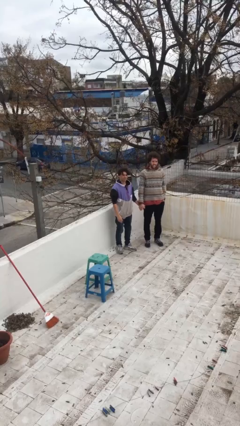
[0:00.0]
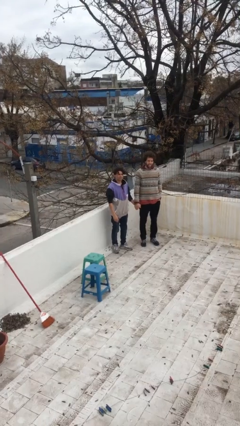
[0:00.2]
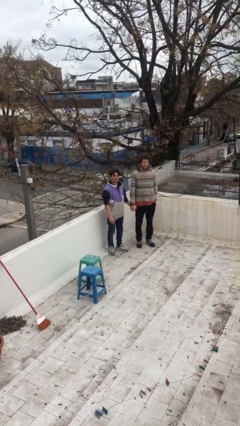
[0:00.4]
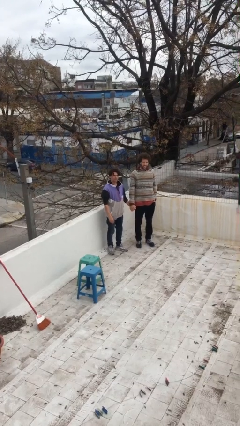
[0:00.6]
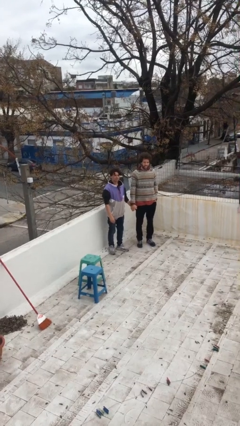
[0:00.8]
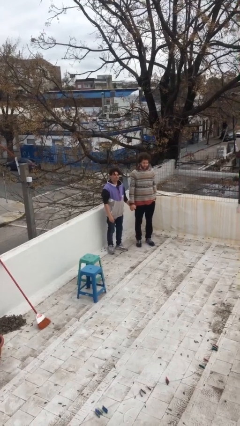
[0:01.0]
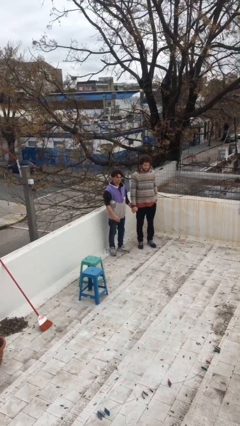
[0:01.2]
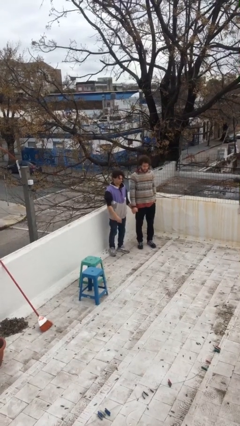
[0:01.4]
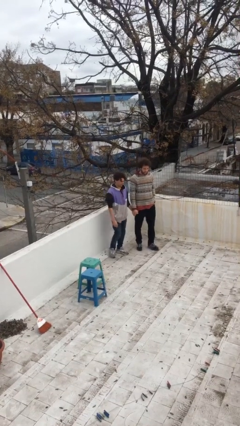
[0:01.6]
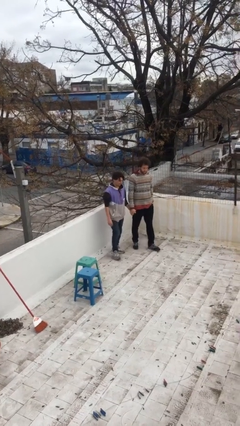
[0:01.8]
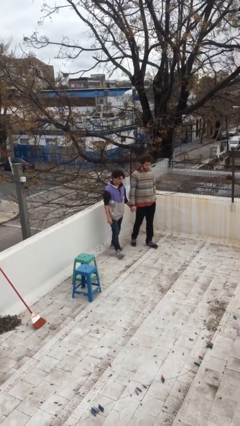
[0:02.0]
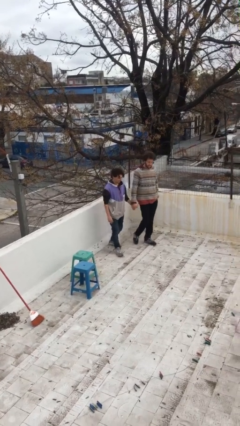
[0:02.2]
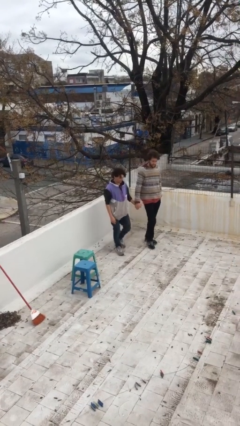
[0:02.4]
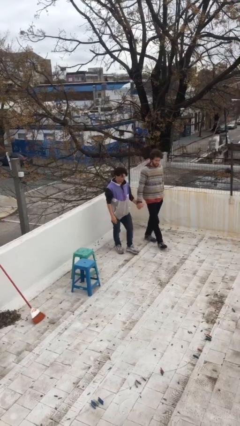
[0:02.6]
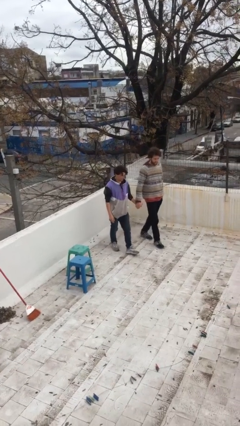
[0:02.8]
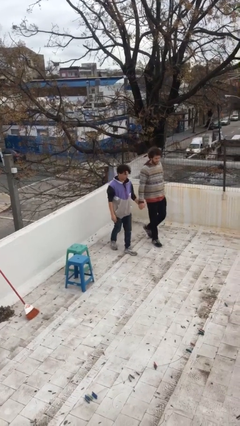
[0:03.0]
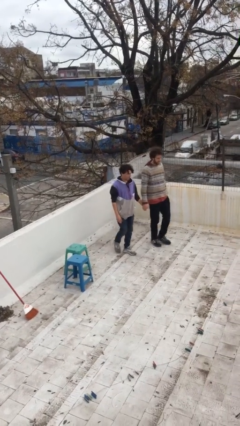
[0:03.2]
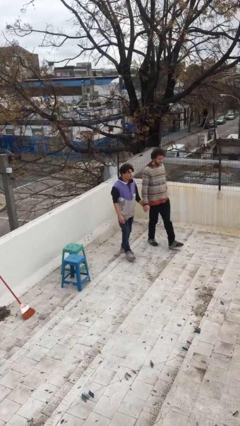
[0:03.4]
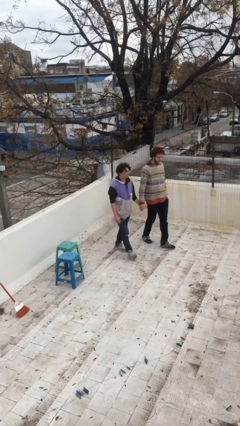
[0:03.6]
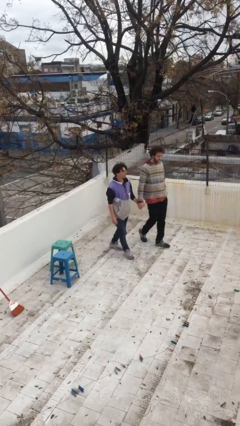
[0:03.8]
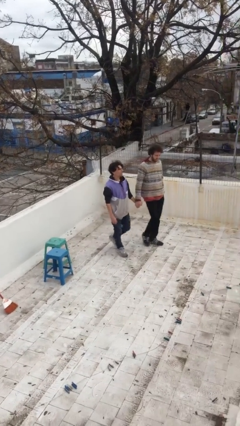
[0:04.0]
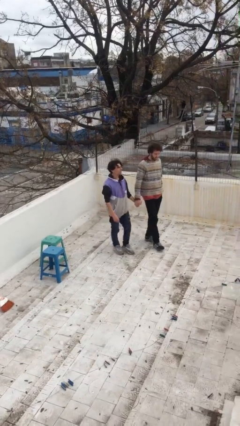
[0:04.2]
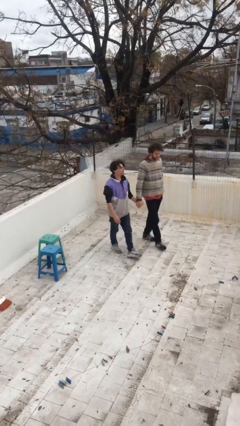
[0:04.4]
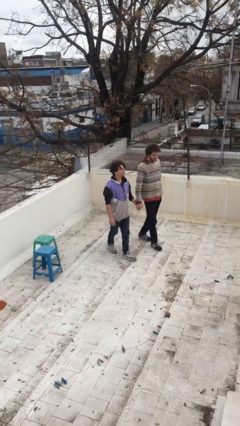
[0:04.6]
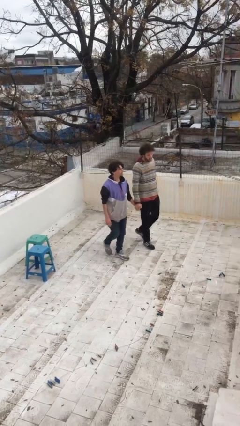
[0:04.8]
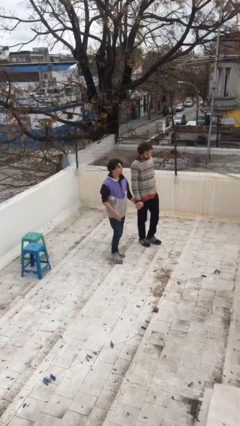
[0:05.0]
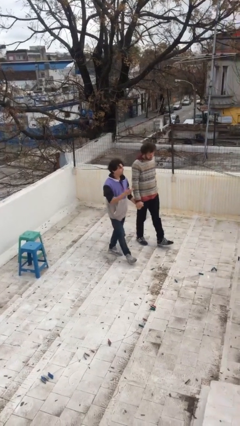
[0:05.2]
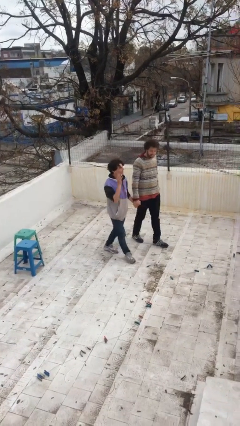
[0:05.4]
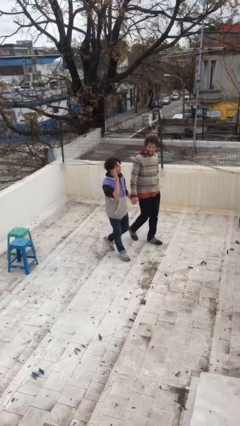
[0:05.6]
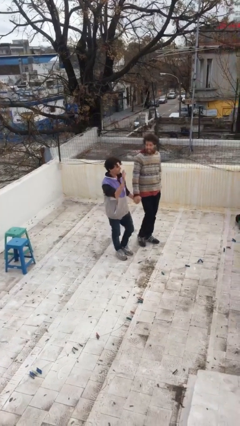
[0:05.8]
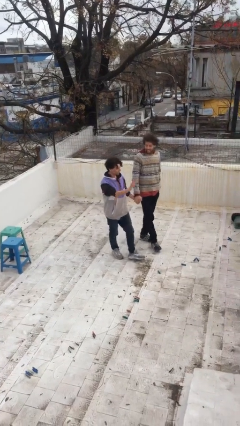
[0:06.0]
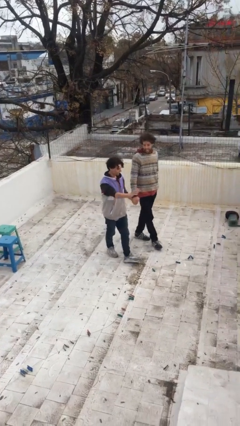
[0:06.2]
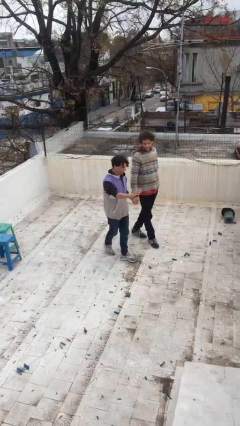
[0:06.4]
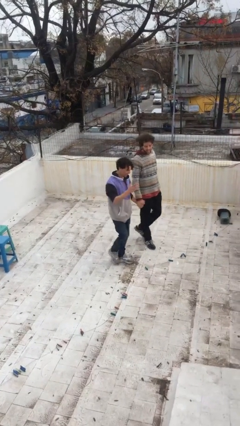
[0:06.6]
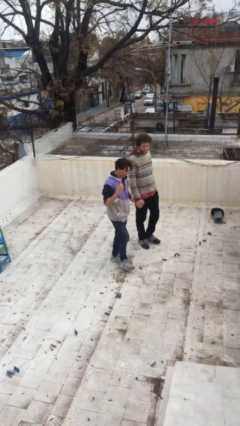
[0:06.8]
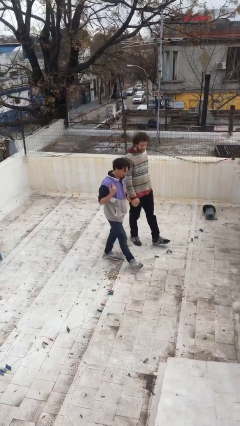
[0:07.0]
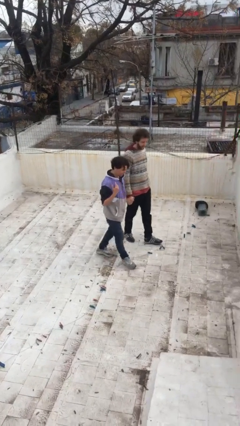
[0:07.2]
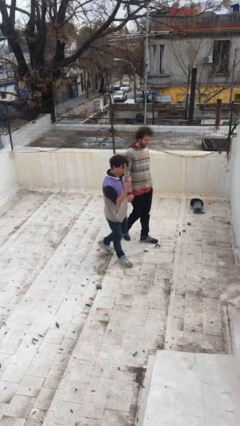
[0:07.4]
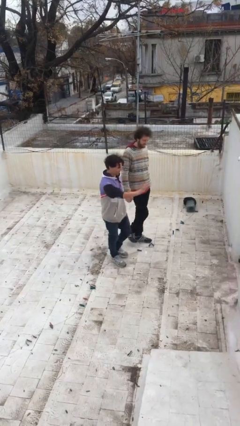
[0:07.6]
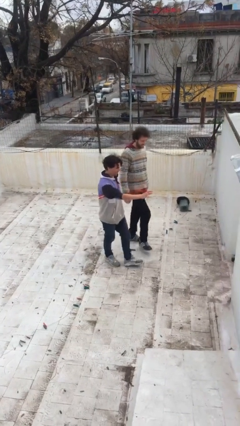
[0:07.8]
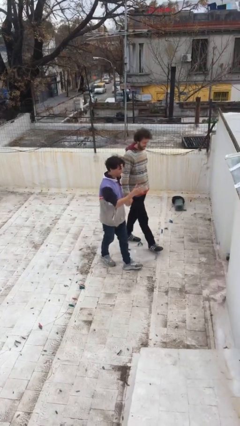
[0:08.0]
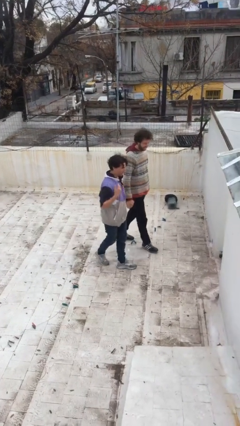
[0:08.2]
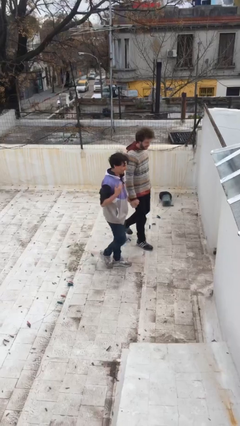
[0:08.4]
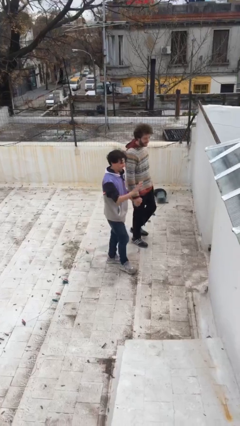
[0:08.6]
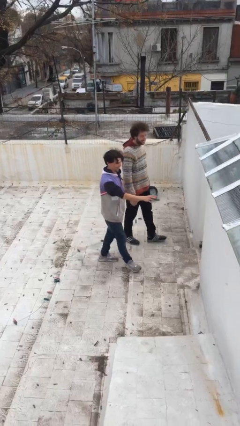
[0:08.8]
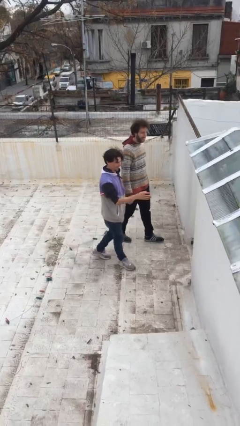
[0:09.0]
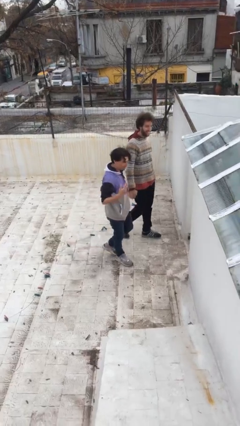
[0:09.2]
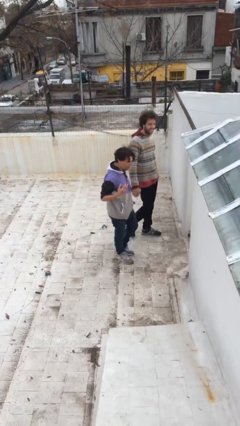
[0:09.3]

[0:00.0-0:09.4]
person holds hand

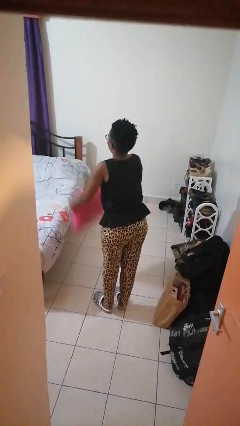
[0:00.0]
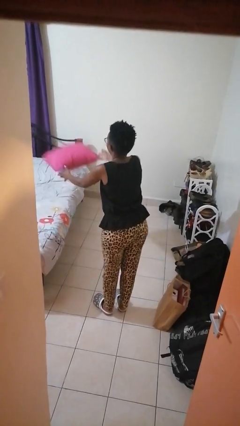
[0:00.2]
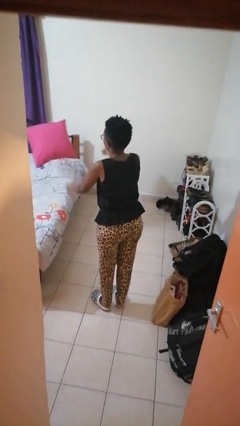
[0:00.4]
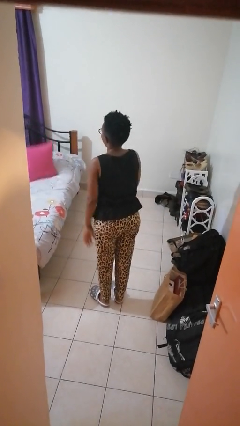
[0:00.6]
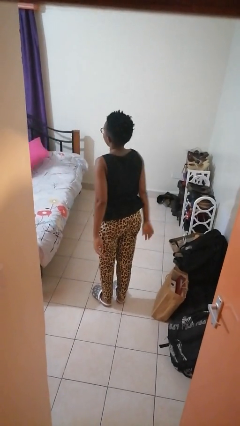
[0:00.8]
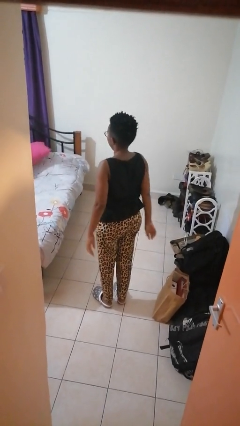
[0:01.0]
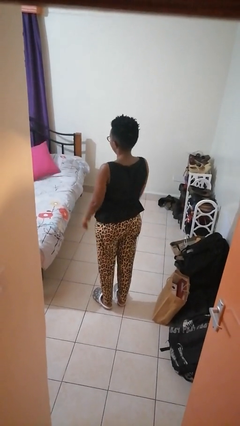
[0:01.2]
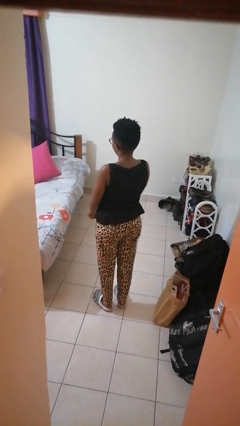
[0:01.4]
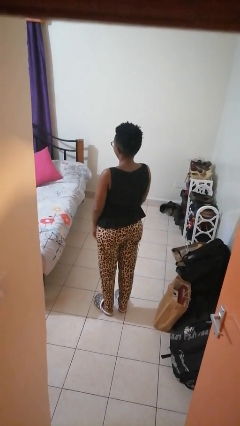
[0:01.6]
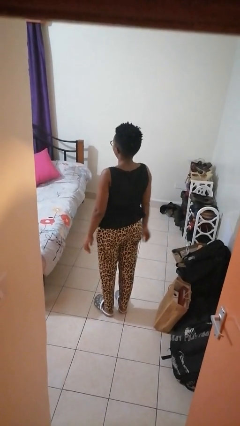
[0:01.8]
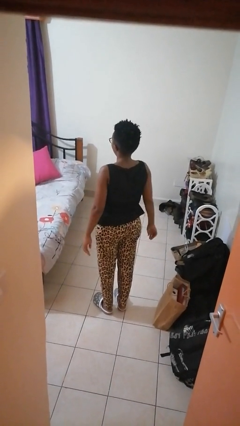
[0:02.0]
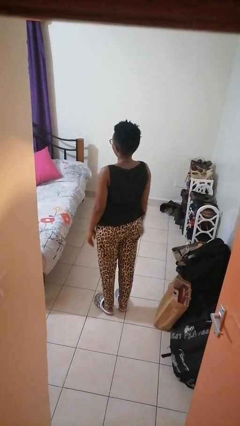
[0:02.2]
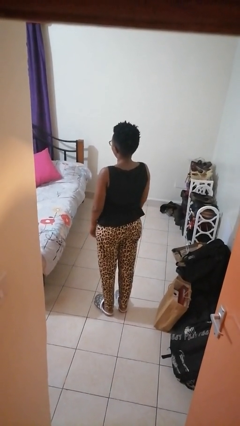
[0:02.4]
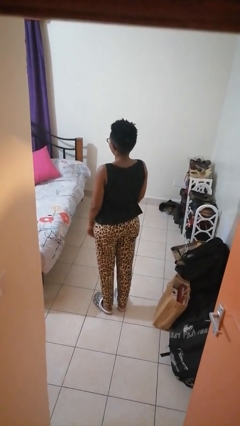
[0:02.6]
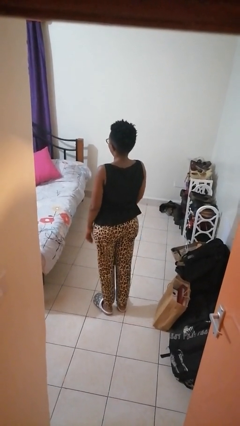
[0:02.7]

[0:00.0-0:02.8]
person throws object on bed

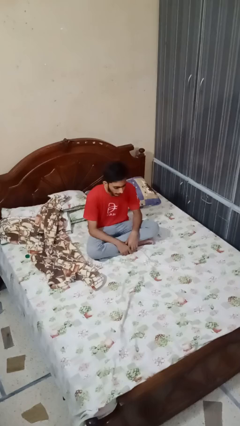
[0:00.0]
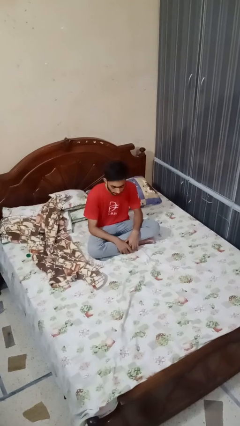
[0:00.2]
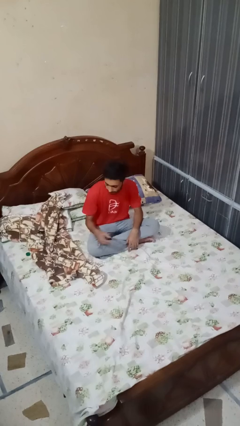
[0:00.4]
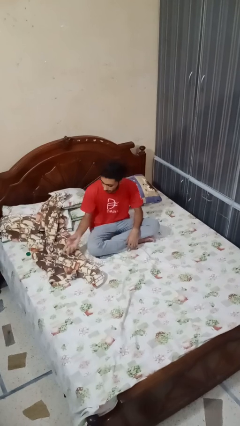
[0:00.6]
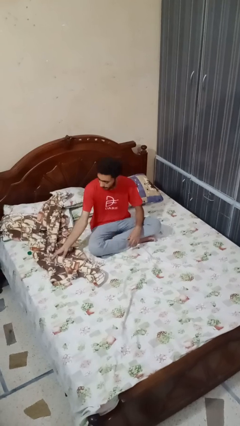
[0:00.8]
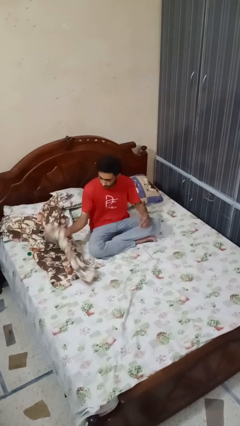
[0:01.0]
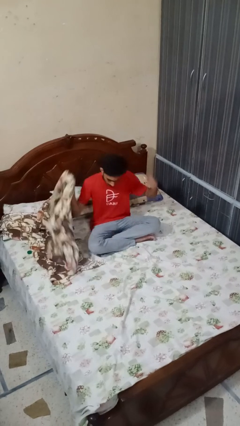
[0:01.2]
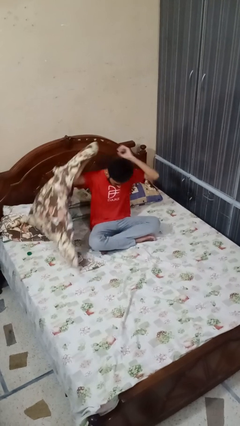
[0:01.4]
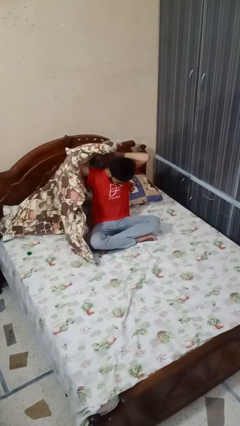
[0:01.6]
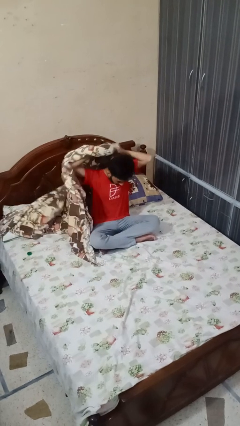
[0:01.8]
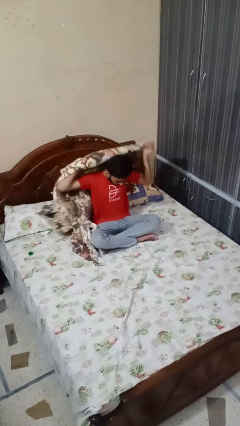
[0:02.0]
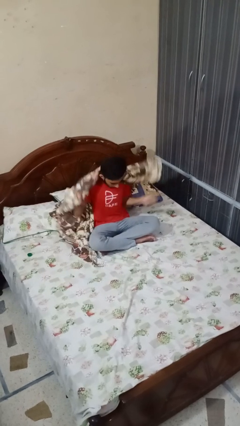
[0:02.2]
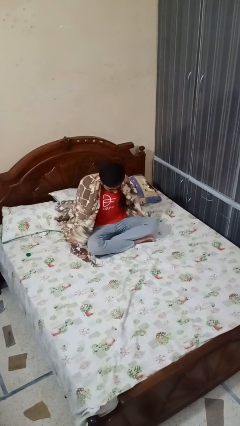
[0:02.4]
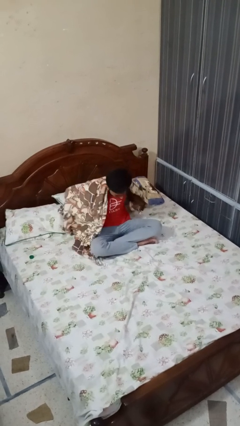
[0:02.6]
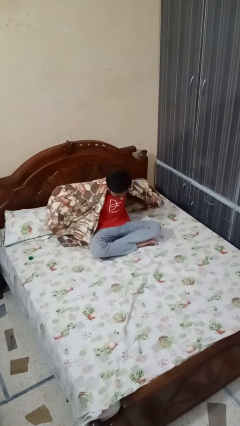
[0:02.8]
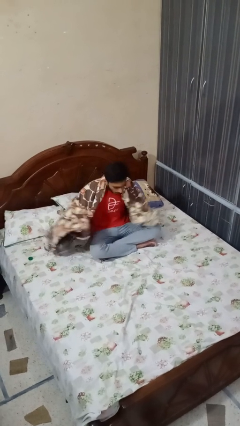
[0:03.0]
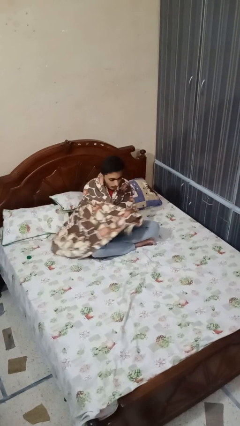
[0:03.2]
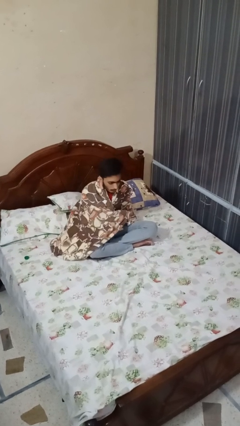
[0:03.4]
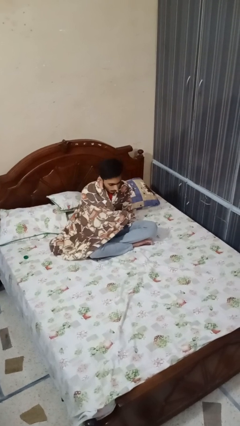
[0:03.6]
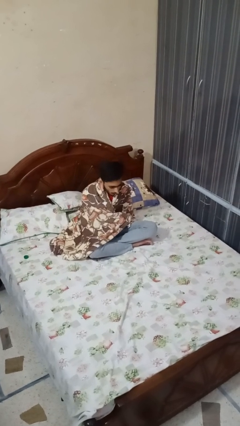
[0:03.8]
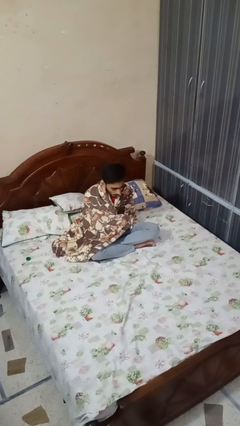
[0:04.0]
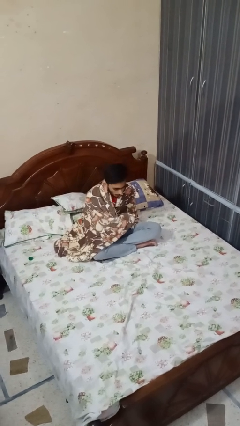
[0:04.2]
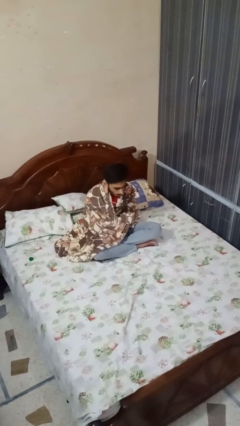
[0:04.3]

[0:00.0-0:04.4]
person covers with blanket

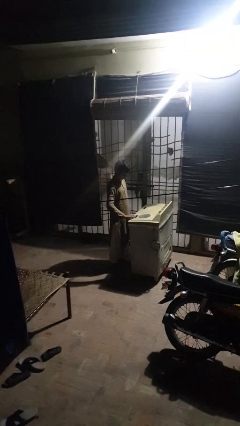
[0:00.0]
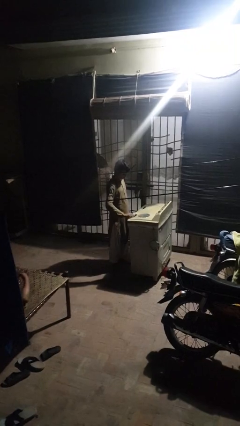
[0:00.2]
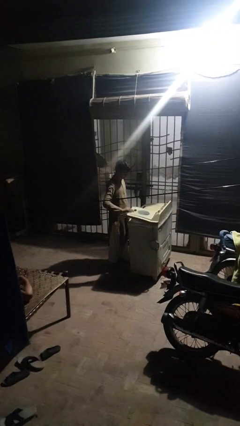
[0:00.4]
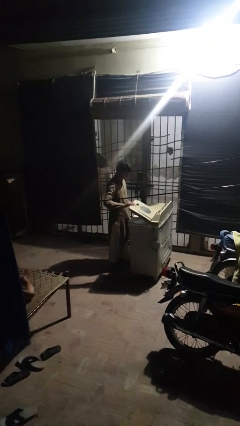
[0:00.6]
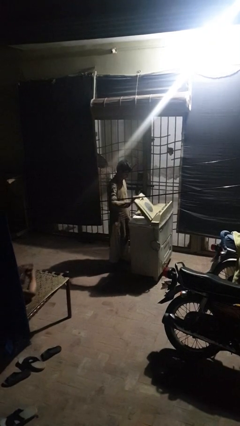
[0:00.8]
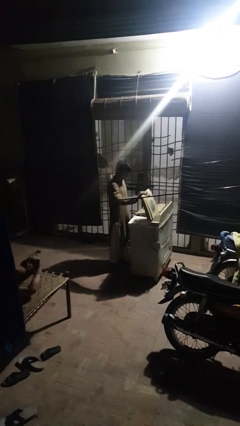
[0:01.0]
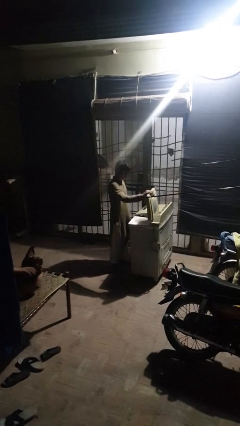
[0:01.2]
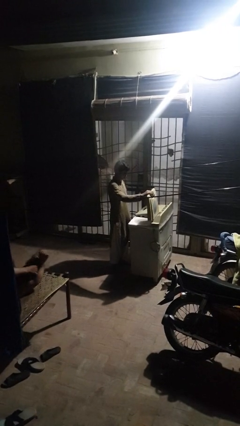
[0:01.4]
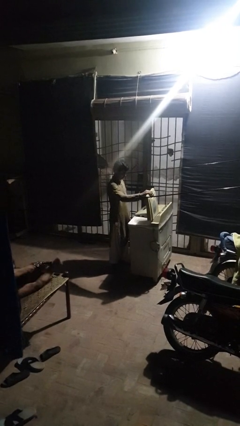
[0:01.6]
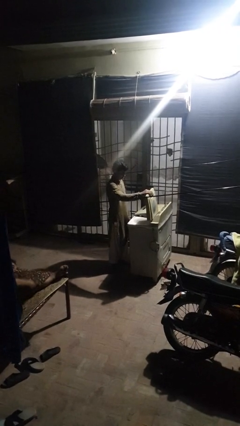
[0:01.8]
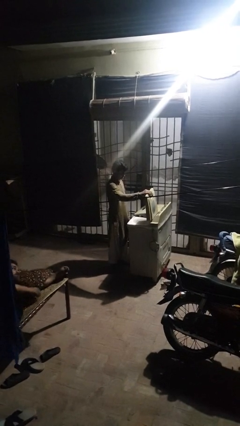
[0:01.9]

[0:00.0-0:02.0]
person opens clothes washer
